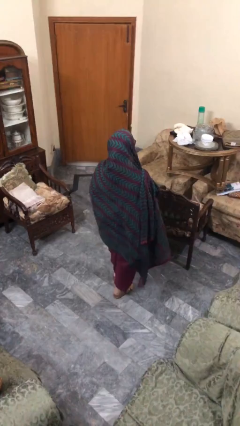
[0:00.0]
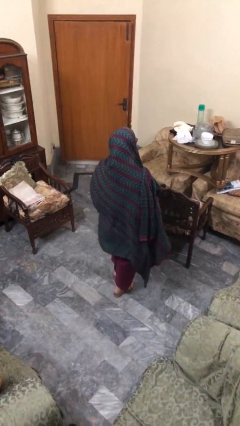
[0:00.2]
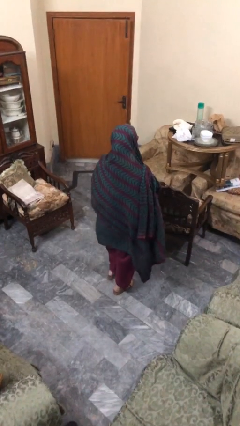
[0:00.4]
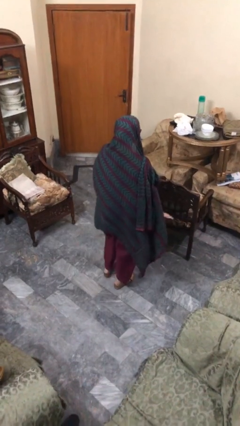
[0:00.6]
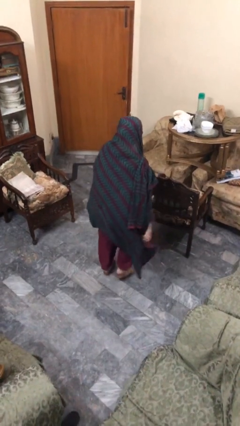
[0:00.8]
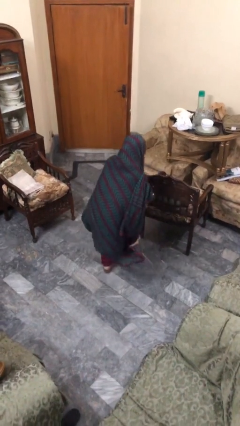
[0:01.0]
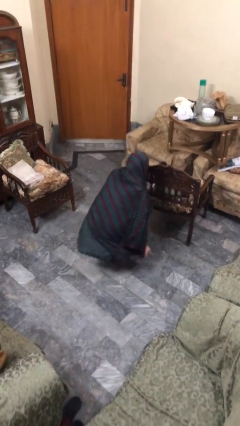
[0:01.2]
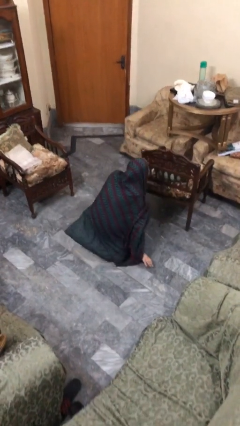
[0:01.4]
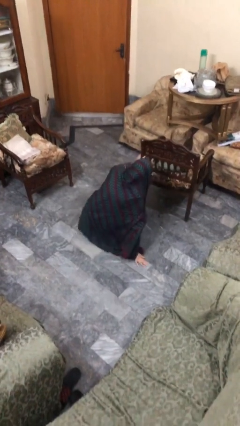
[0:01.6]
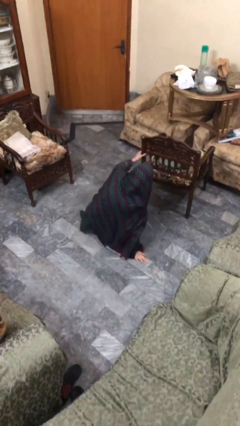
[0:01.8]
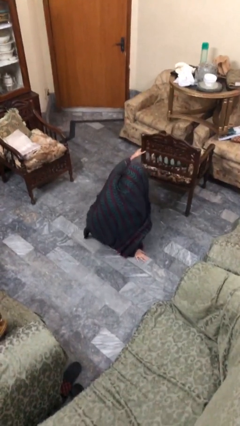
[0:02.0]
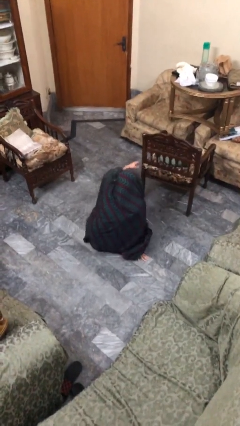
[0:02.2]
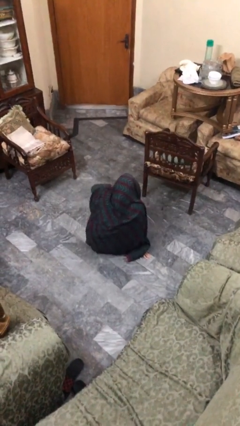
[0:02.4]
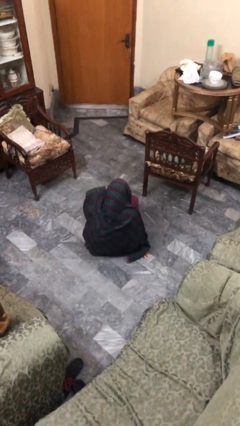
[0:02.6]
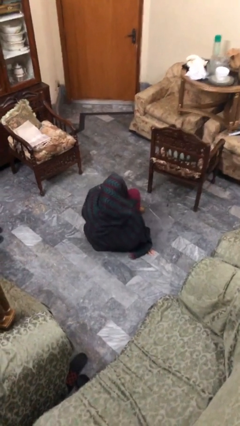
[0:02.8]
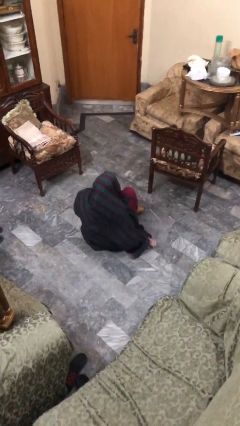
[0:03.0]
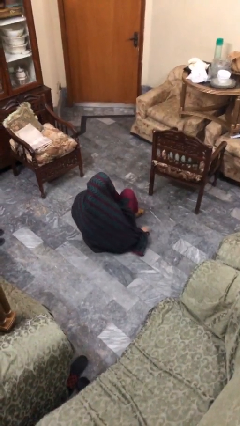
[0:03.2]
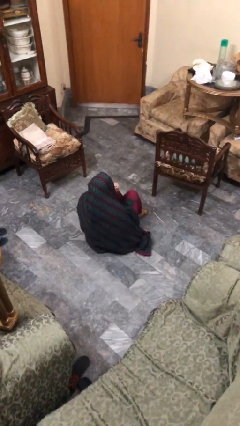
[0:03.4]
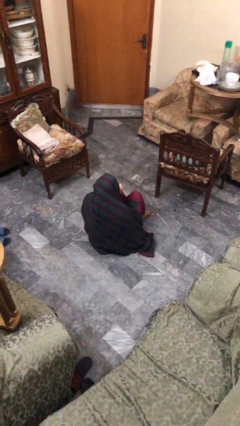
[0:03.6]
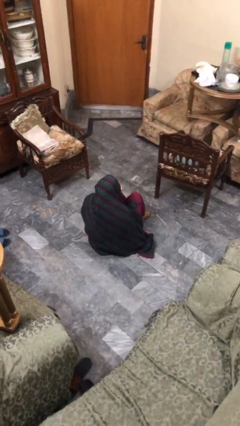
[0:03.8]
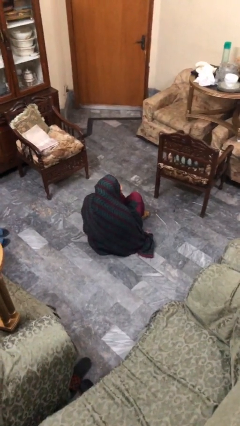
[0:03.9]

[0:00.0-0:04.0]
person sits crisscross

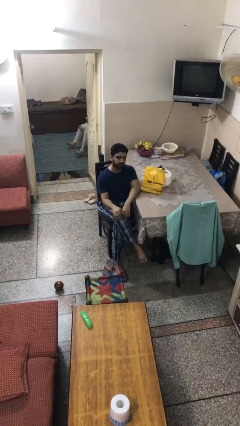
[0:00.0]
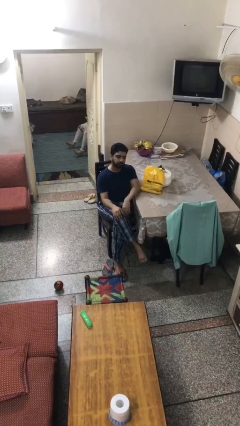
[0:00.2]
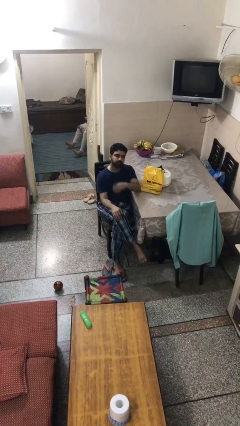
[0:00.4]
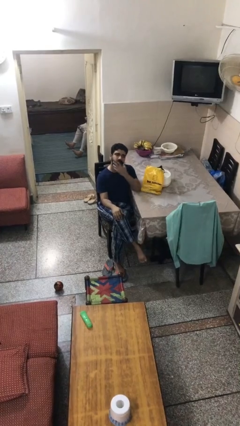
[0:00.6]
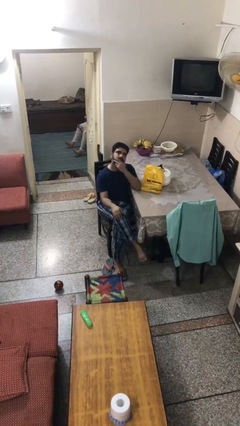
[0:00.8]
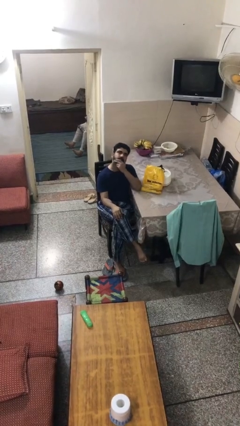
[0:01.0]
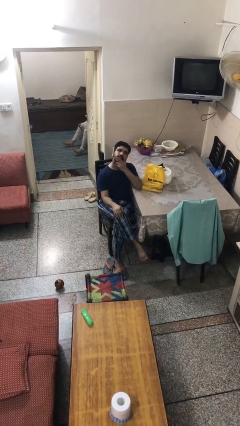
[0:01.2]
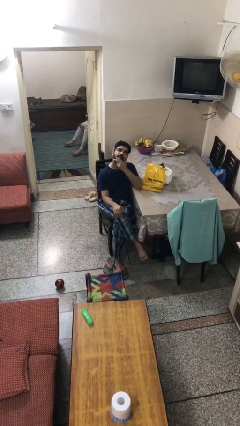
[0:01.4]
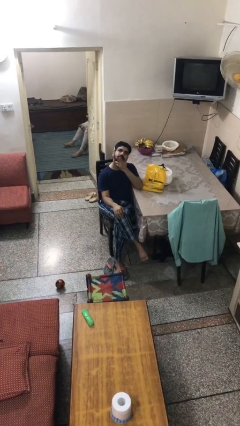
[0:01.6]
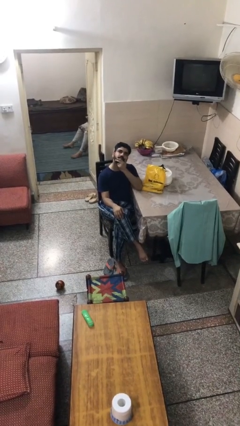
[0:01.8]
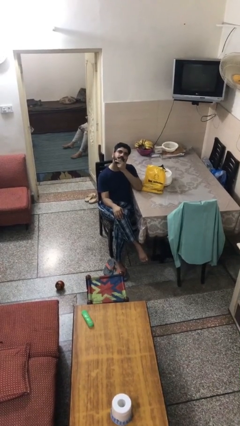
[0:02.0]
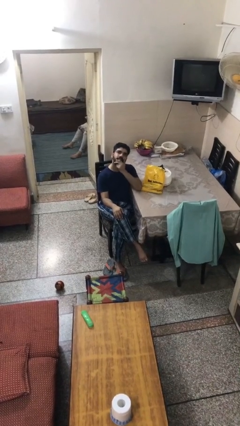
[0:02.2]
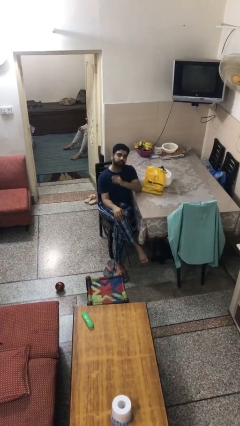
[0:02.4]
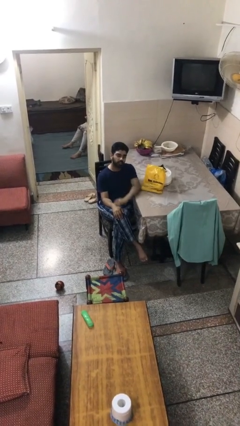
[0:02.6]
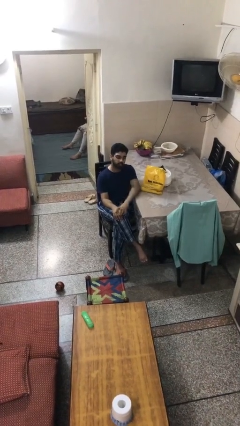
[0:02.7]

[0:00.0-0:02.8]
person strokes chin

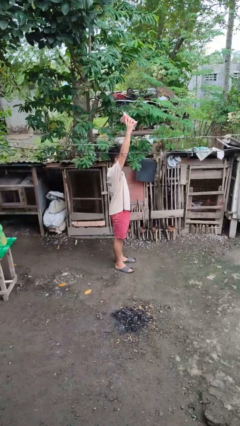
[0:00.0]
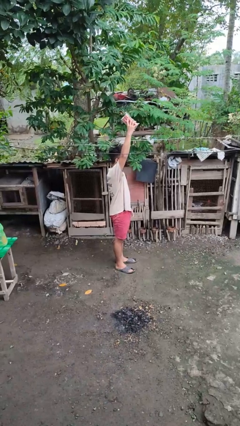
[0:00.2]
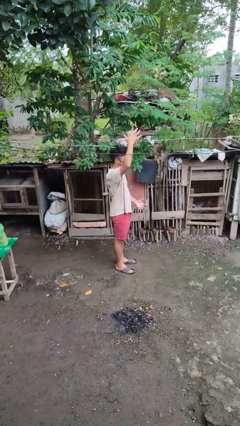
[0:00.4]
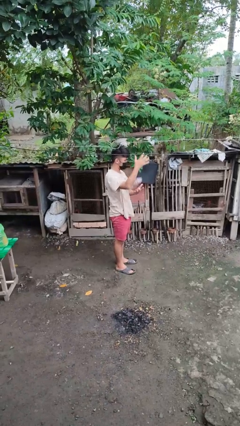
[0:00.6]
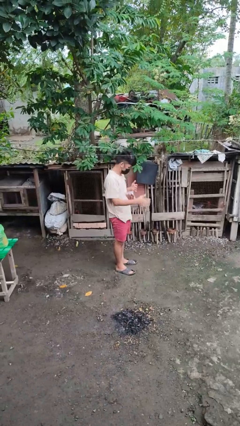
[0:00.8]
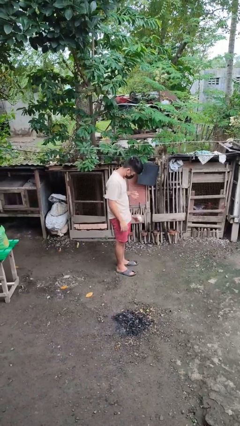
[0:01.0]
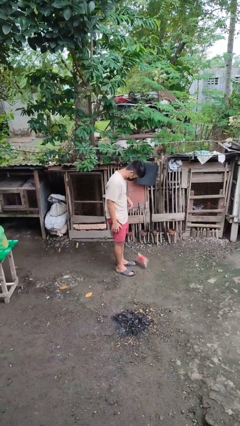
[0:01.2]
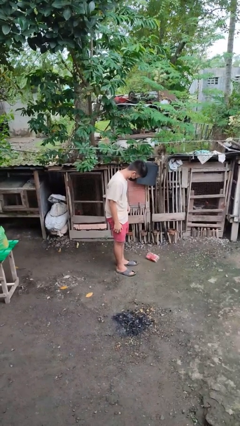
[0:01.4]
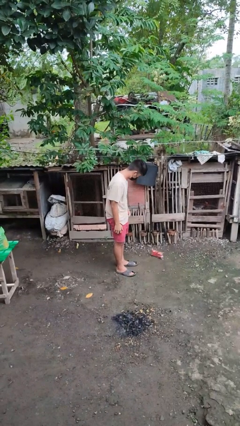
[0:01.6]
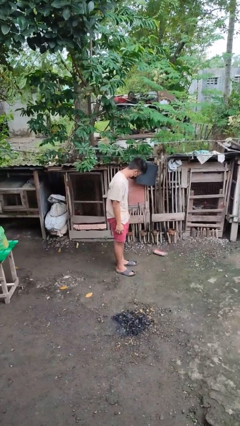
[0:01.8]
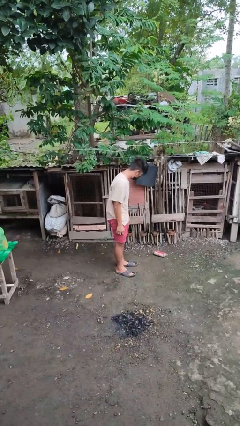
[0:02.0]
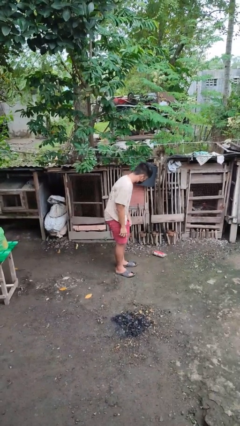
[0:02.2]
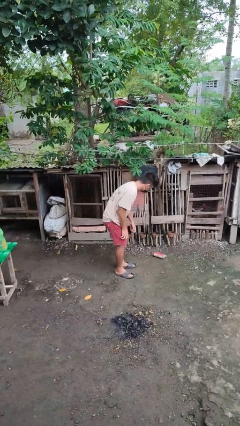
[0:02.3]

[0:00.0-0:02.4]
person drops object

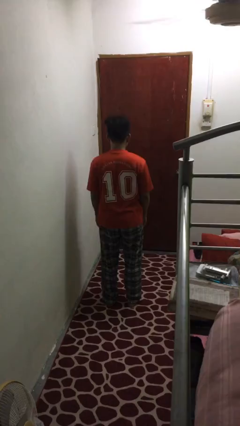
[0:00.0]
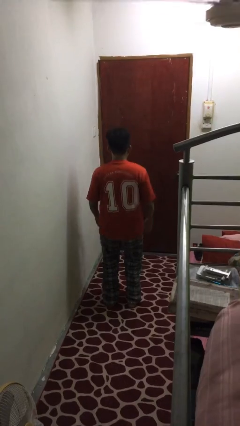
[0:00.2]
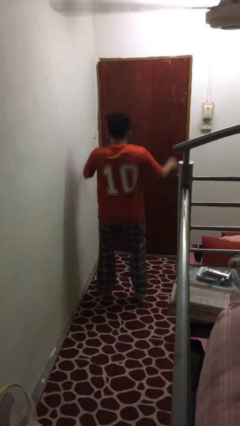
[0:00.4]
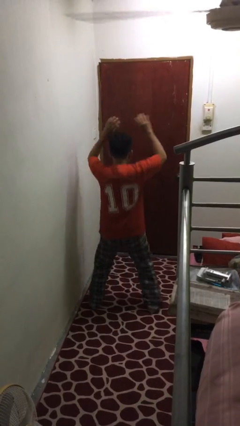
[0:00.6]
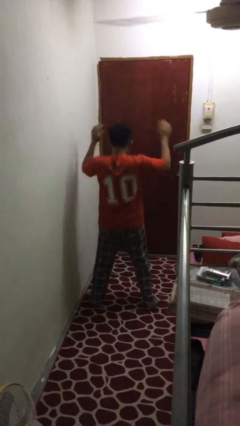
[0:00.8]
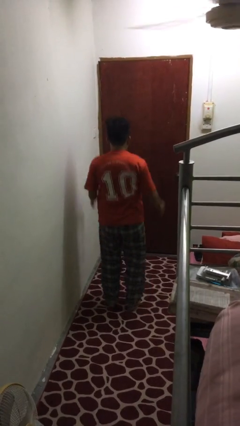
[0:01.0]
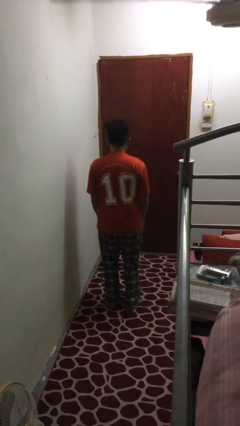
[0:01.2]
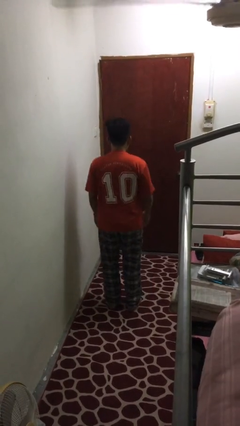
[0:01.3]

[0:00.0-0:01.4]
person exercises with jumping jacks

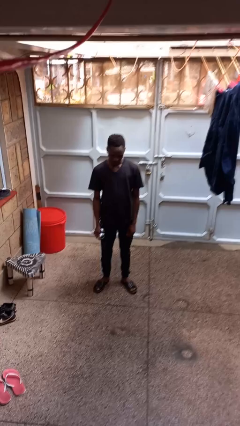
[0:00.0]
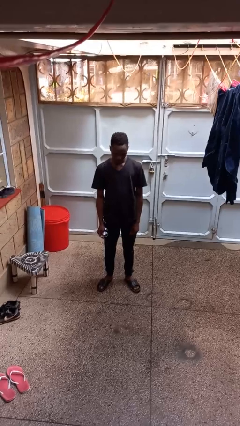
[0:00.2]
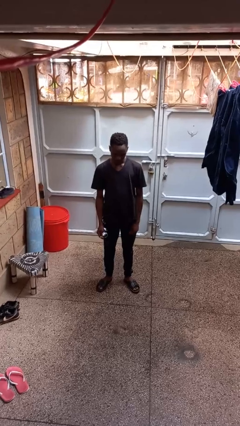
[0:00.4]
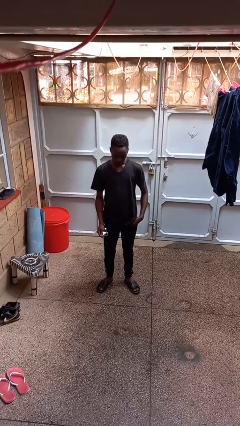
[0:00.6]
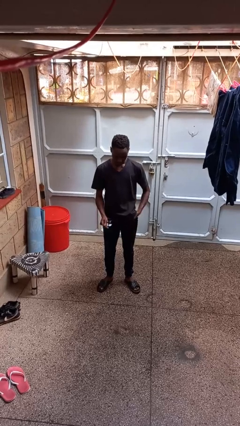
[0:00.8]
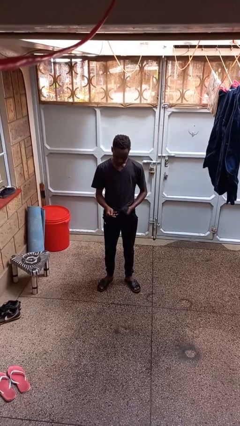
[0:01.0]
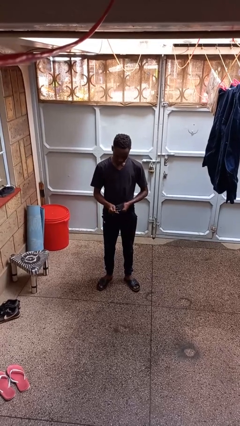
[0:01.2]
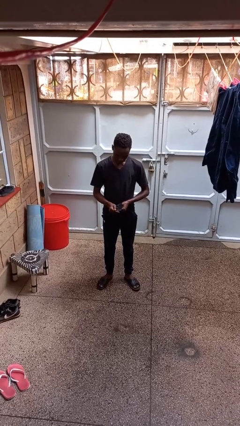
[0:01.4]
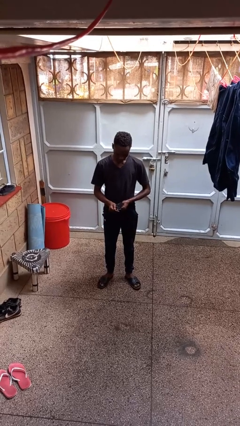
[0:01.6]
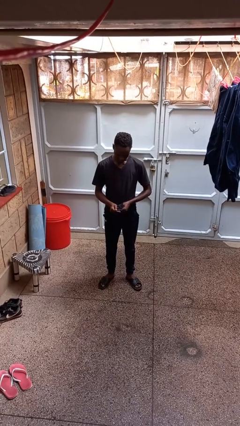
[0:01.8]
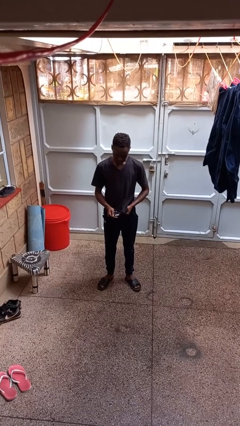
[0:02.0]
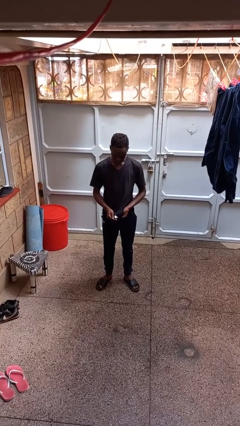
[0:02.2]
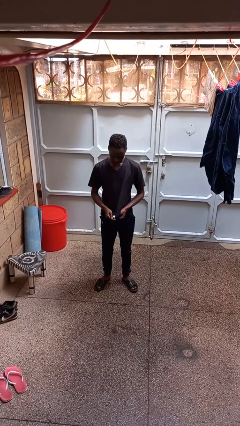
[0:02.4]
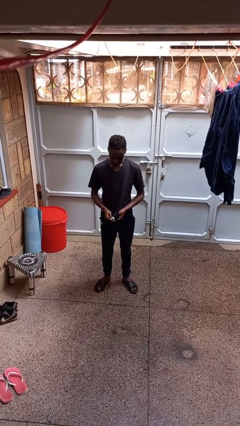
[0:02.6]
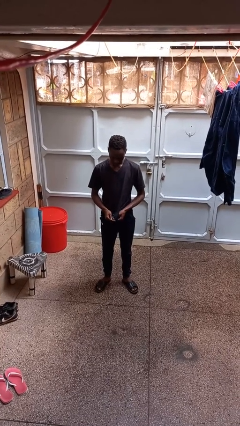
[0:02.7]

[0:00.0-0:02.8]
person cleans eyeglasses

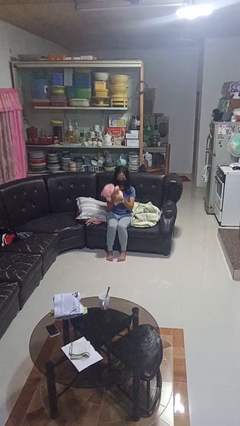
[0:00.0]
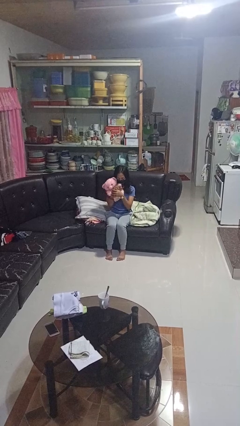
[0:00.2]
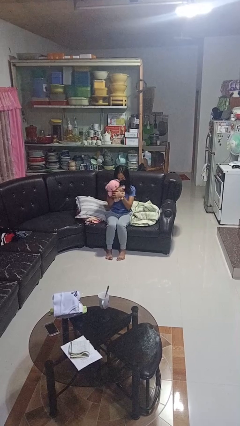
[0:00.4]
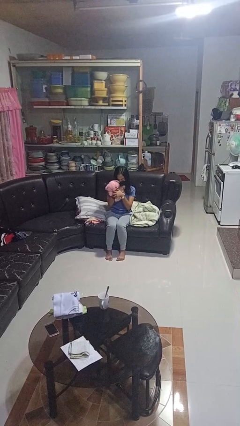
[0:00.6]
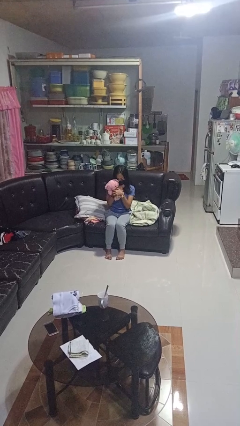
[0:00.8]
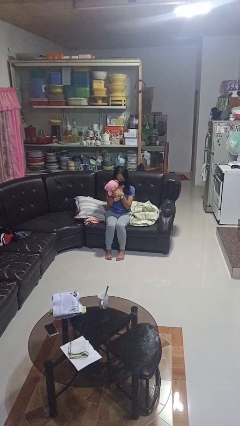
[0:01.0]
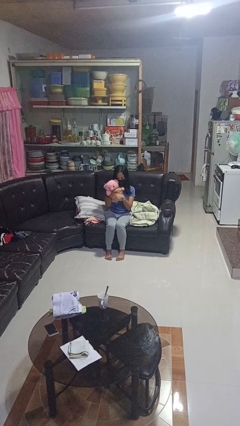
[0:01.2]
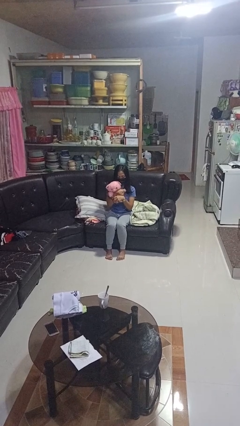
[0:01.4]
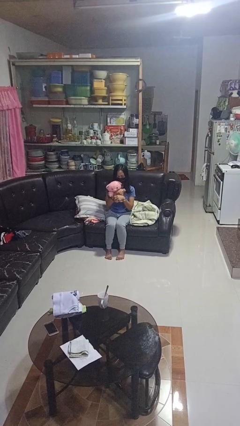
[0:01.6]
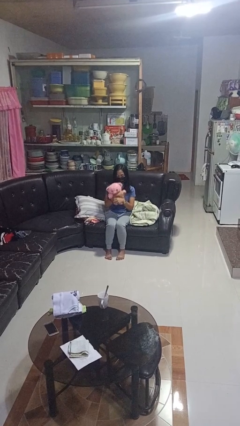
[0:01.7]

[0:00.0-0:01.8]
person hugs stuffed animal

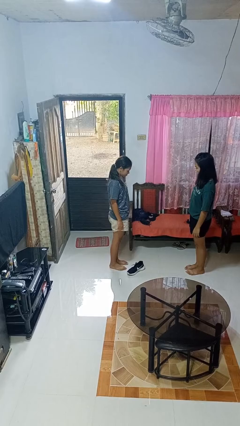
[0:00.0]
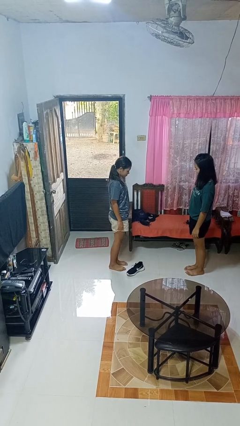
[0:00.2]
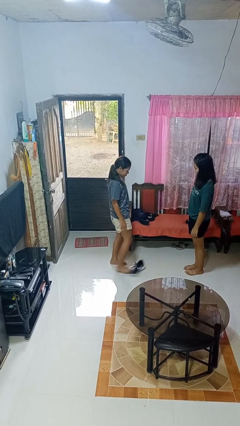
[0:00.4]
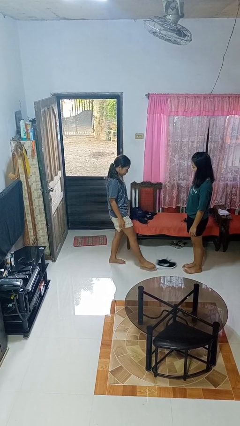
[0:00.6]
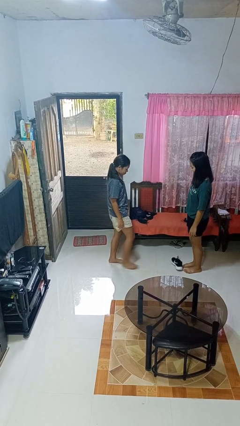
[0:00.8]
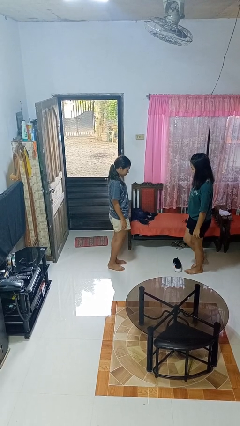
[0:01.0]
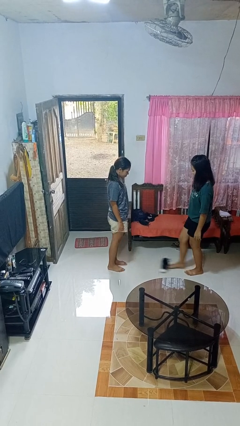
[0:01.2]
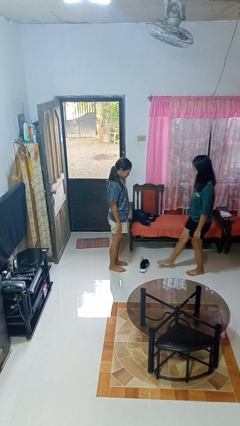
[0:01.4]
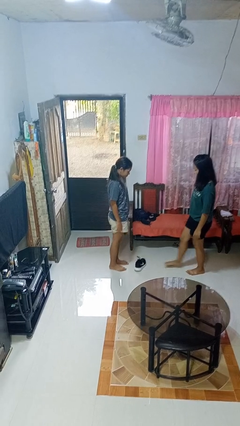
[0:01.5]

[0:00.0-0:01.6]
person kicks object to person

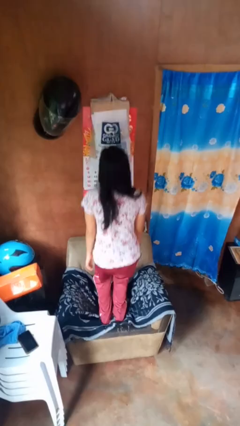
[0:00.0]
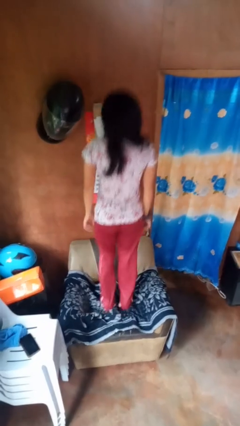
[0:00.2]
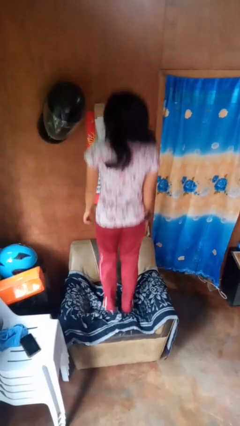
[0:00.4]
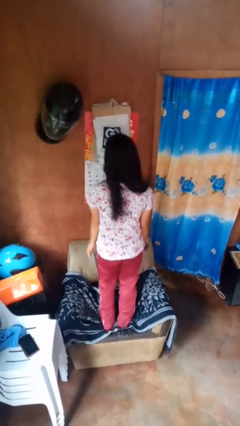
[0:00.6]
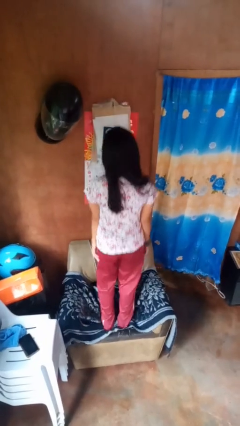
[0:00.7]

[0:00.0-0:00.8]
person jumps on couch
